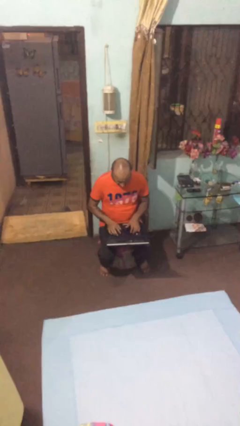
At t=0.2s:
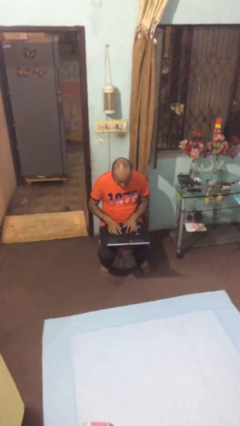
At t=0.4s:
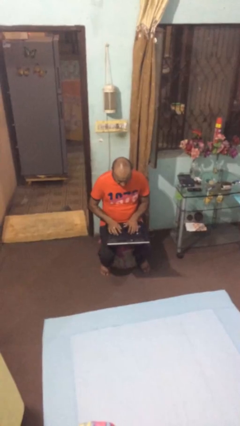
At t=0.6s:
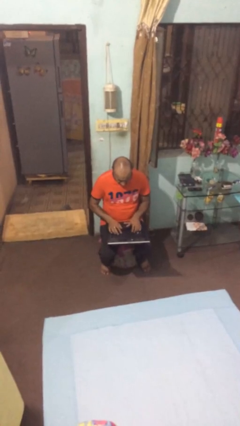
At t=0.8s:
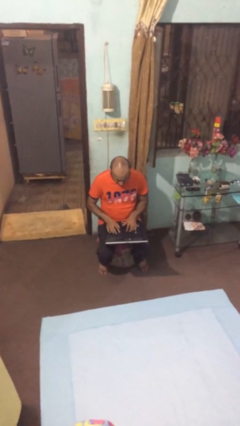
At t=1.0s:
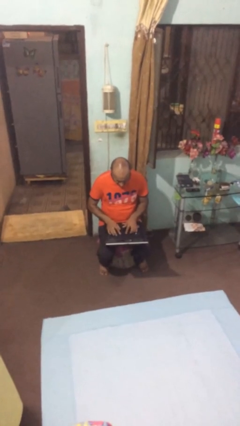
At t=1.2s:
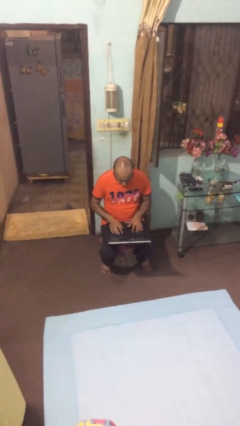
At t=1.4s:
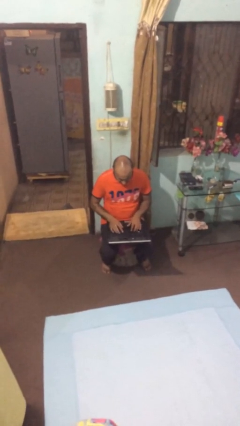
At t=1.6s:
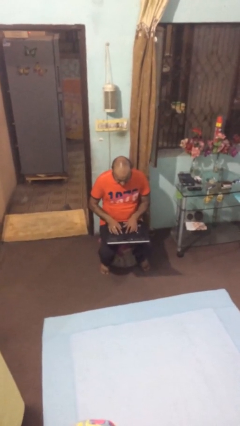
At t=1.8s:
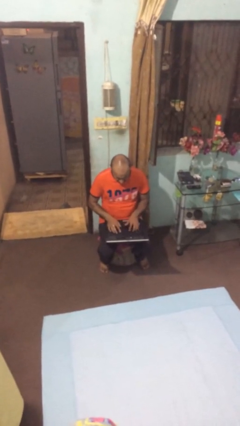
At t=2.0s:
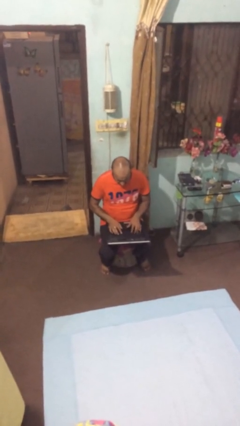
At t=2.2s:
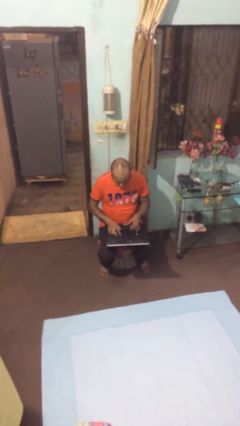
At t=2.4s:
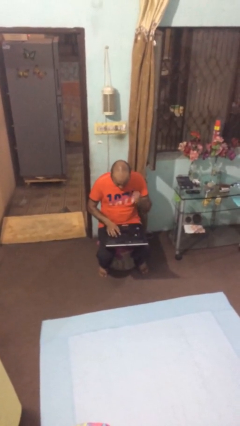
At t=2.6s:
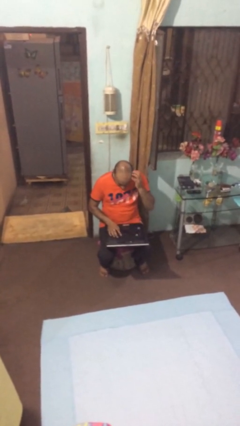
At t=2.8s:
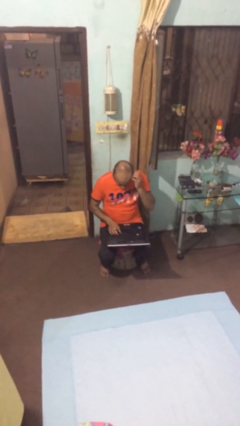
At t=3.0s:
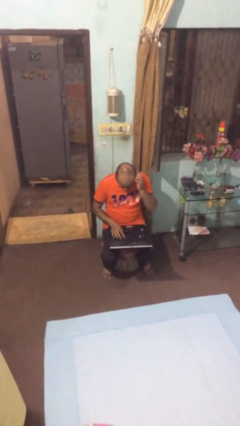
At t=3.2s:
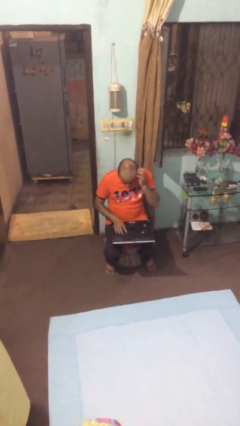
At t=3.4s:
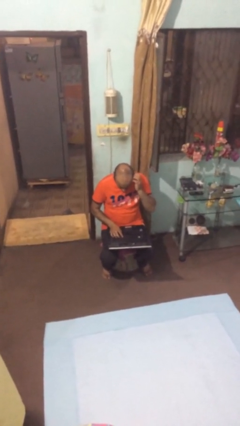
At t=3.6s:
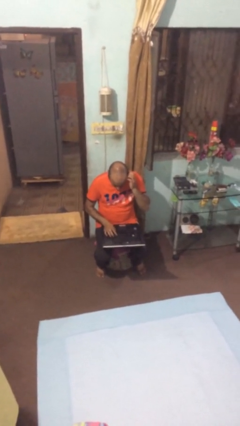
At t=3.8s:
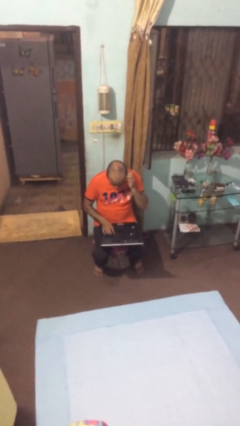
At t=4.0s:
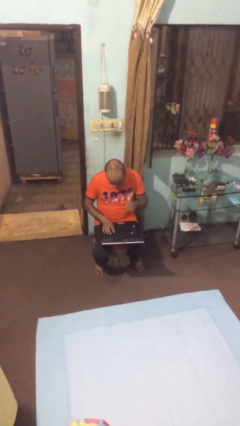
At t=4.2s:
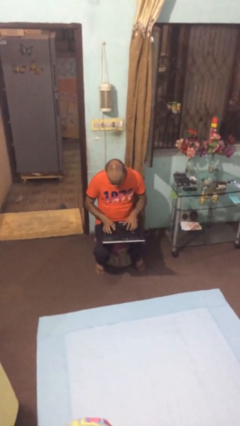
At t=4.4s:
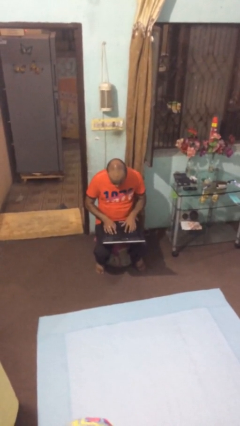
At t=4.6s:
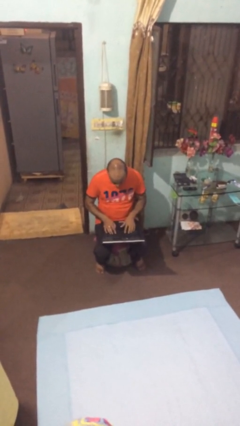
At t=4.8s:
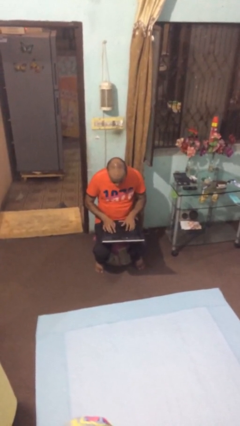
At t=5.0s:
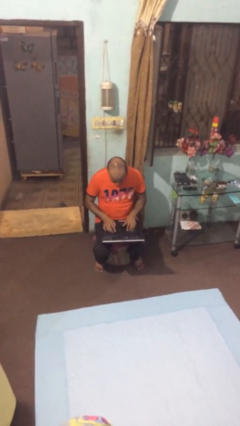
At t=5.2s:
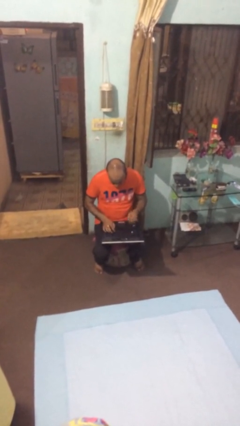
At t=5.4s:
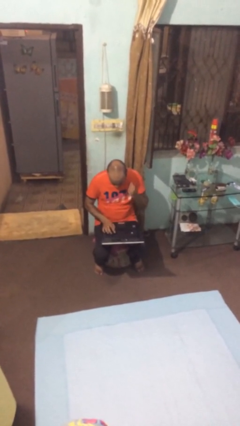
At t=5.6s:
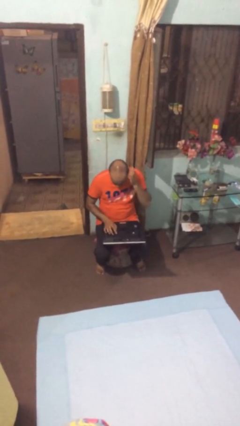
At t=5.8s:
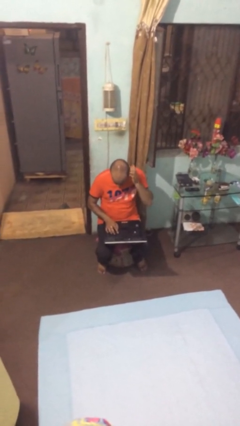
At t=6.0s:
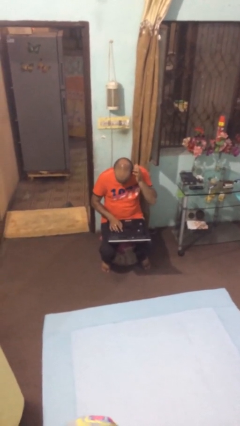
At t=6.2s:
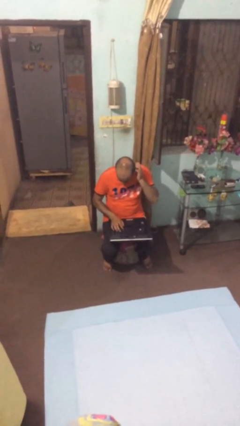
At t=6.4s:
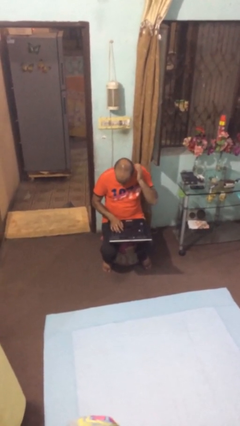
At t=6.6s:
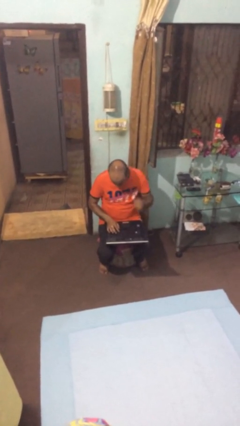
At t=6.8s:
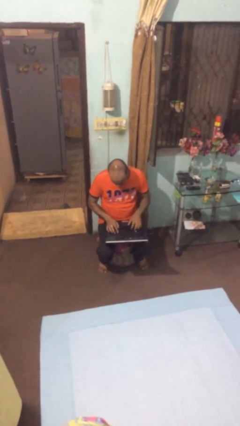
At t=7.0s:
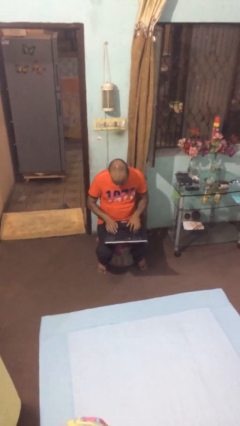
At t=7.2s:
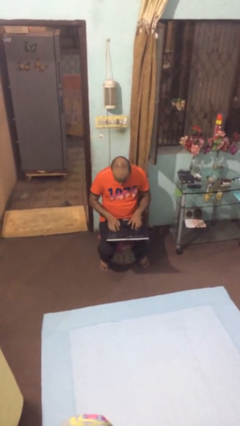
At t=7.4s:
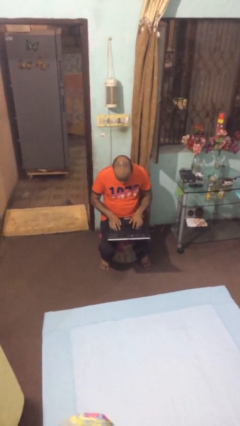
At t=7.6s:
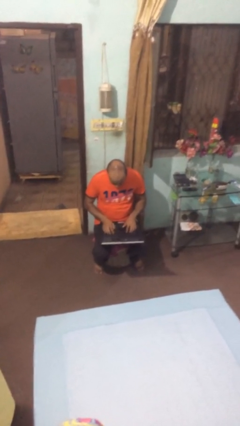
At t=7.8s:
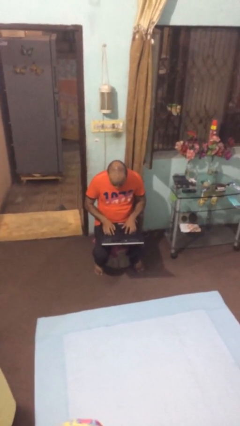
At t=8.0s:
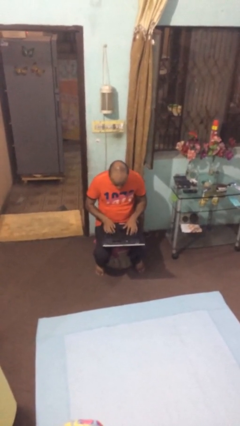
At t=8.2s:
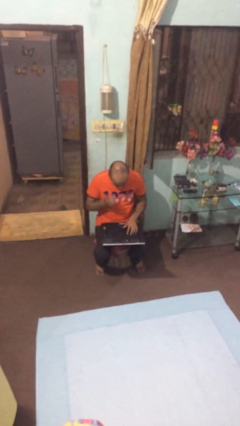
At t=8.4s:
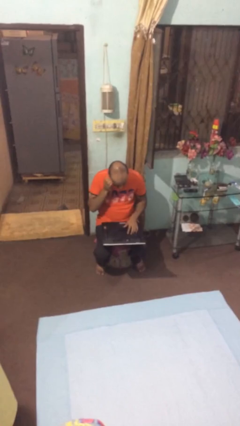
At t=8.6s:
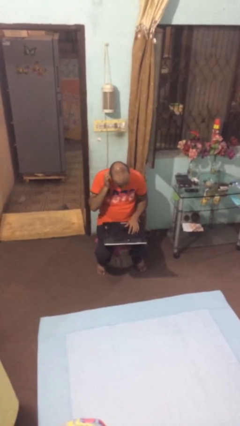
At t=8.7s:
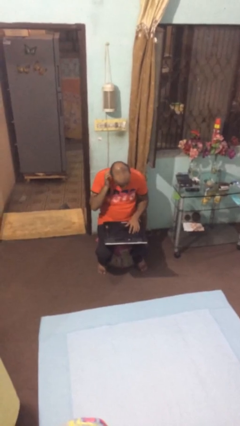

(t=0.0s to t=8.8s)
person interacts with laptop

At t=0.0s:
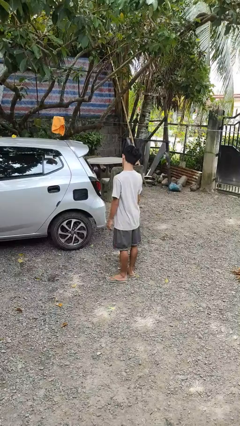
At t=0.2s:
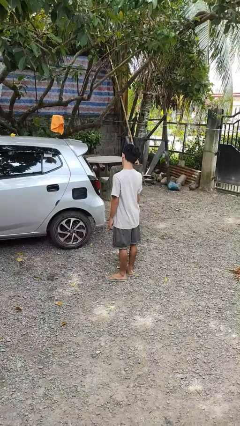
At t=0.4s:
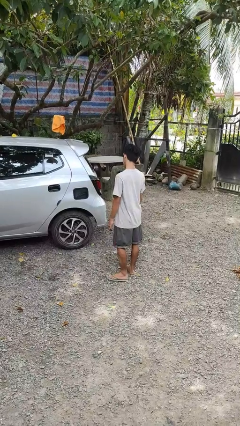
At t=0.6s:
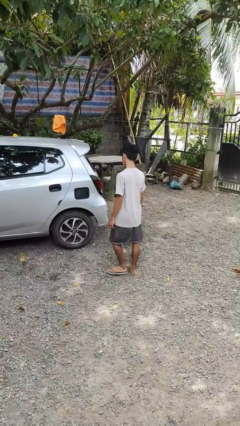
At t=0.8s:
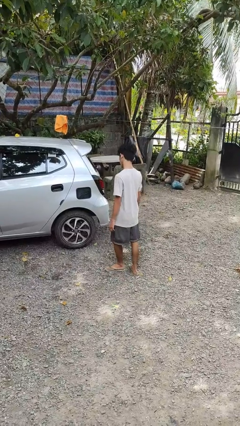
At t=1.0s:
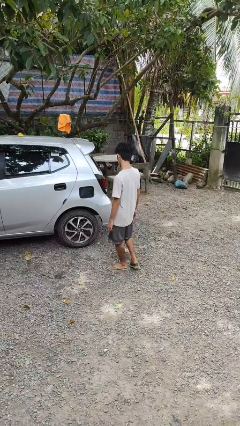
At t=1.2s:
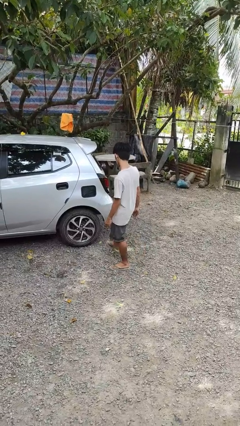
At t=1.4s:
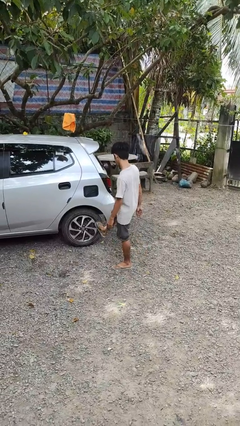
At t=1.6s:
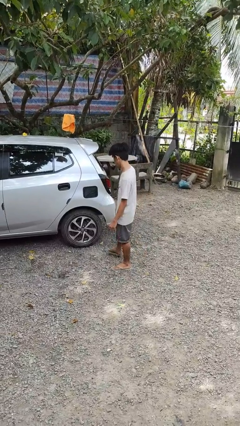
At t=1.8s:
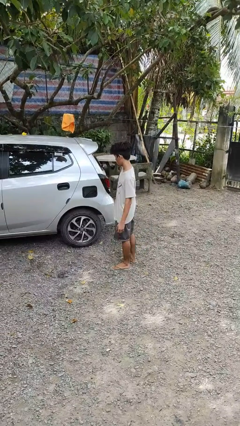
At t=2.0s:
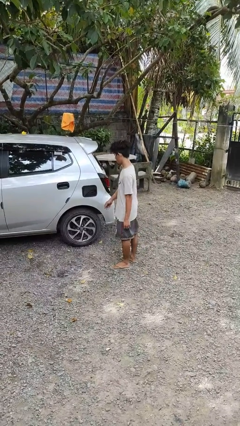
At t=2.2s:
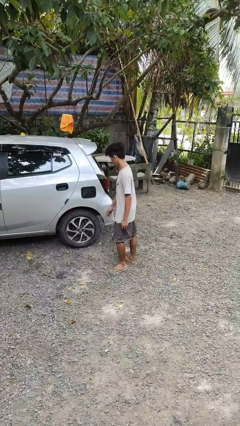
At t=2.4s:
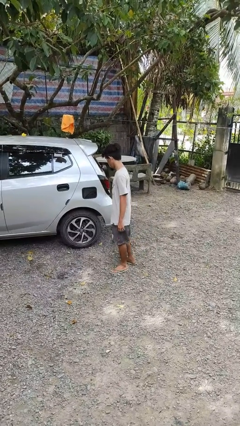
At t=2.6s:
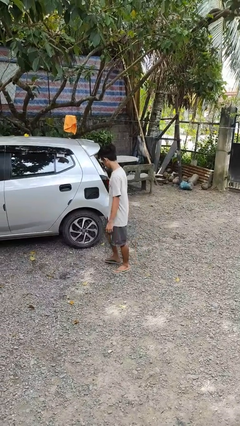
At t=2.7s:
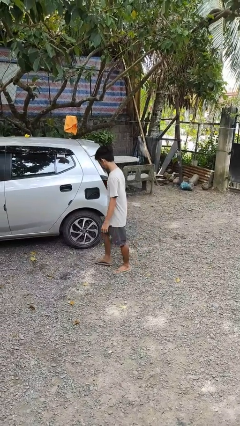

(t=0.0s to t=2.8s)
person kicks car tires

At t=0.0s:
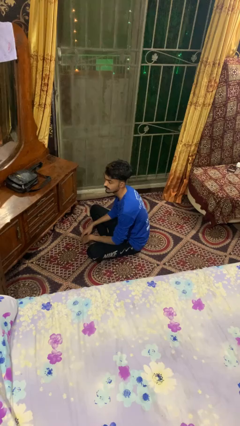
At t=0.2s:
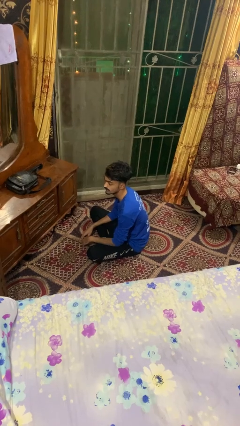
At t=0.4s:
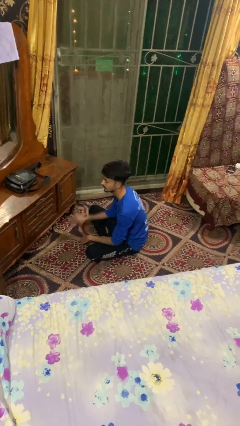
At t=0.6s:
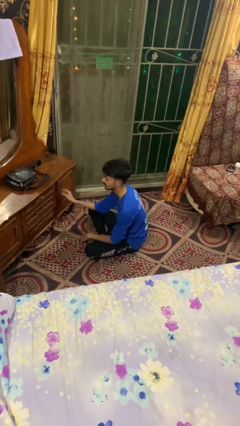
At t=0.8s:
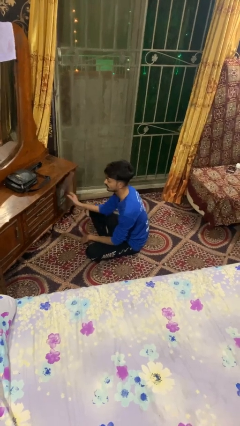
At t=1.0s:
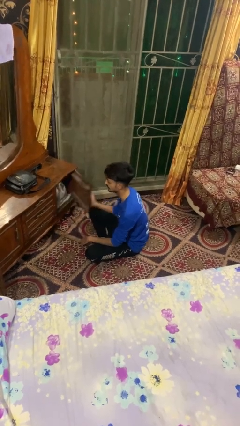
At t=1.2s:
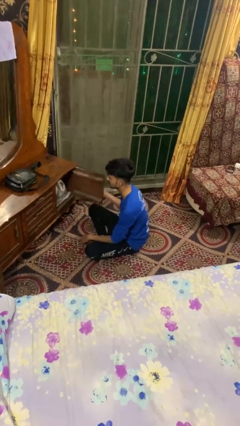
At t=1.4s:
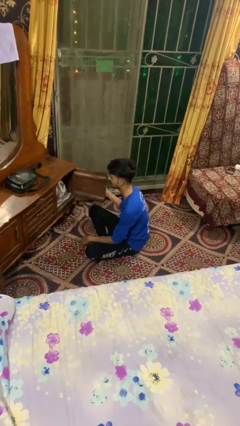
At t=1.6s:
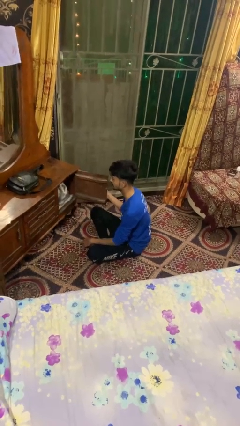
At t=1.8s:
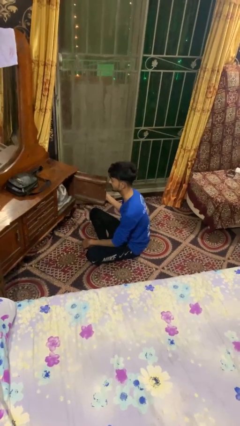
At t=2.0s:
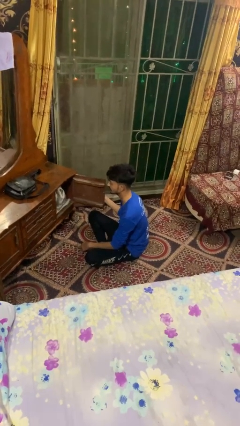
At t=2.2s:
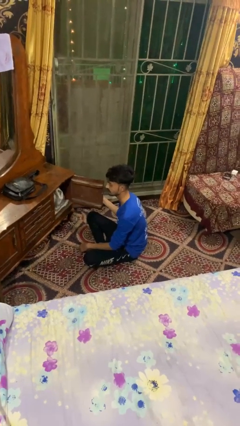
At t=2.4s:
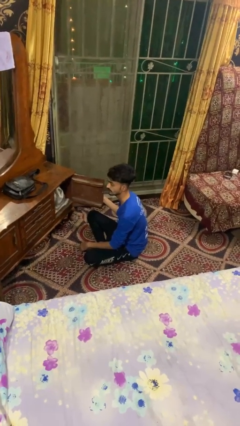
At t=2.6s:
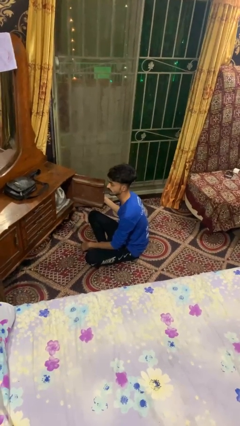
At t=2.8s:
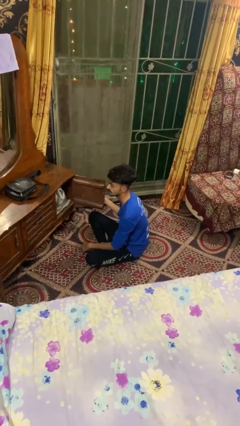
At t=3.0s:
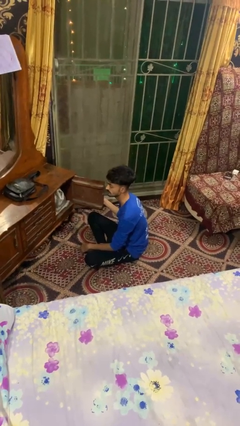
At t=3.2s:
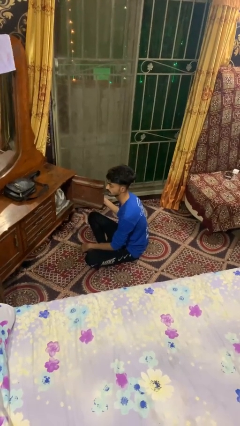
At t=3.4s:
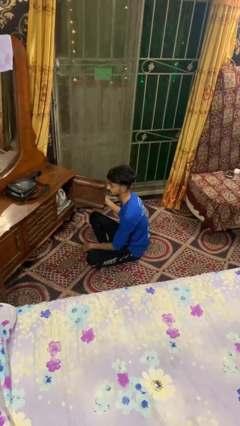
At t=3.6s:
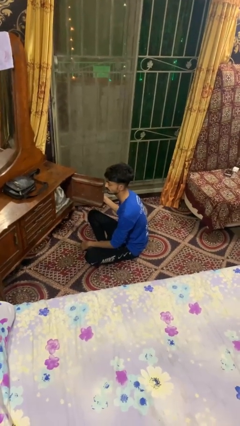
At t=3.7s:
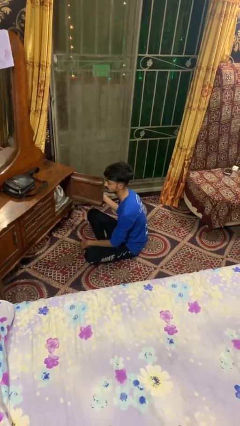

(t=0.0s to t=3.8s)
person opens dresser drawer

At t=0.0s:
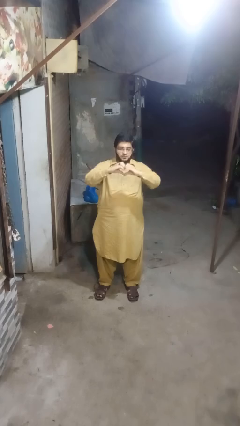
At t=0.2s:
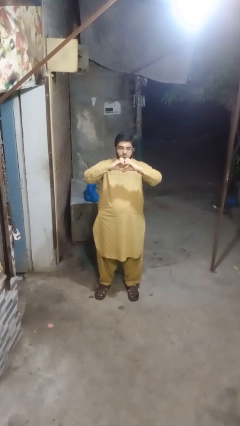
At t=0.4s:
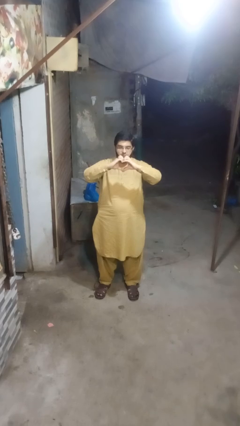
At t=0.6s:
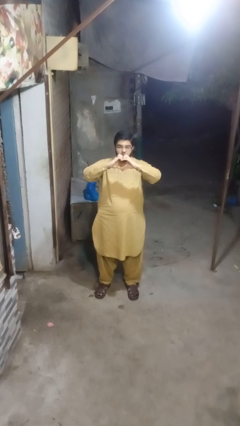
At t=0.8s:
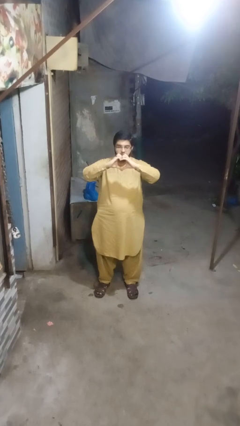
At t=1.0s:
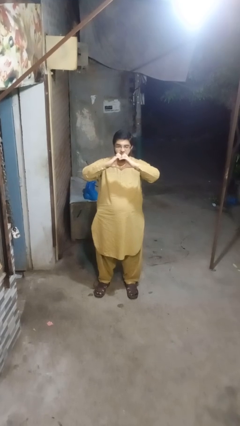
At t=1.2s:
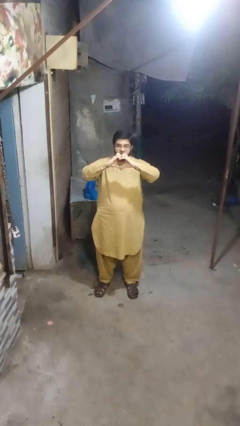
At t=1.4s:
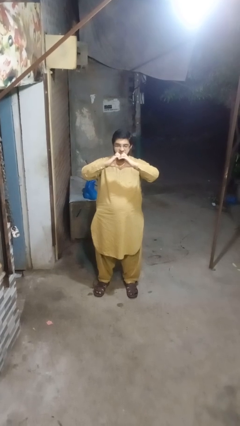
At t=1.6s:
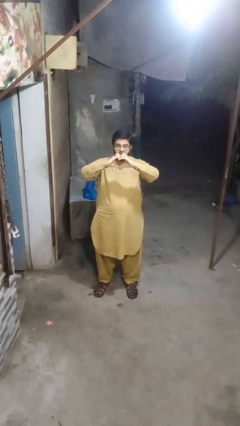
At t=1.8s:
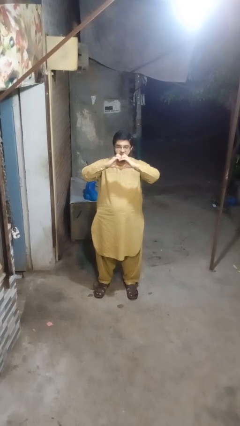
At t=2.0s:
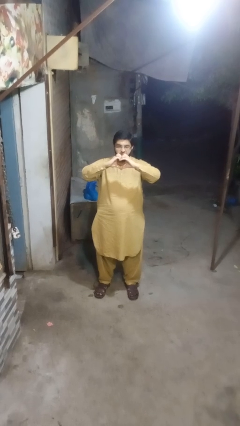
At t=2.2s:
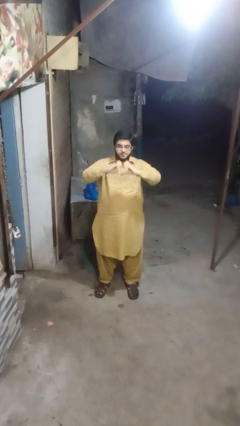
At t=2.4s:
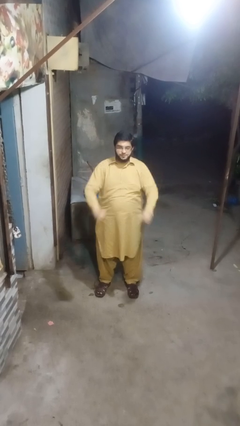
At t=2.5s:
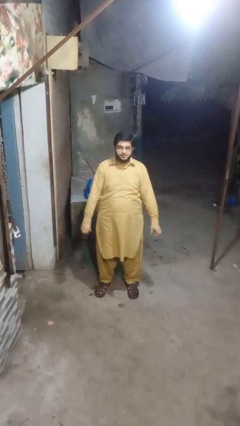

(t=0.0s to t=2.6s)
person gestures heart
